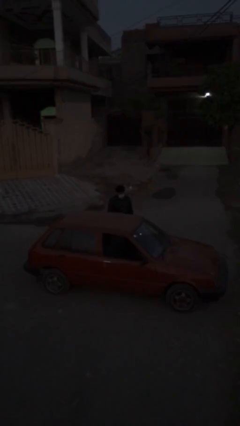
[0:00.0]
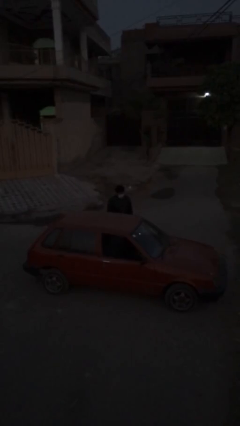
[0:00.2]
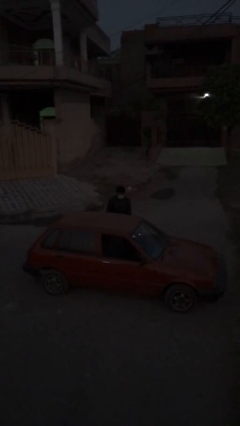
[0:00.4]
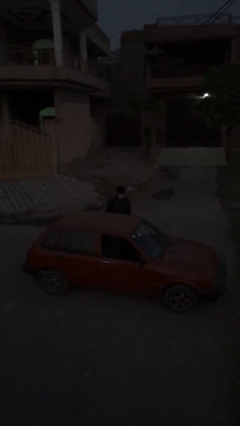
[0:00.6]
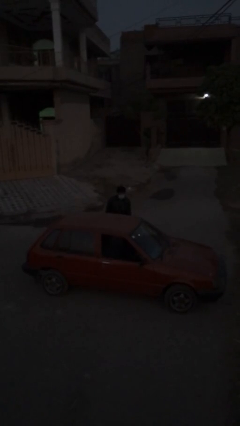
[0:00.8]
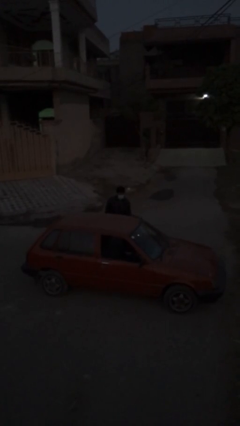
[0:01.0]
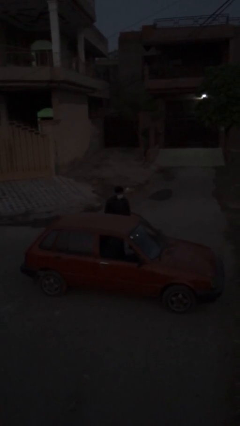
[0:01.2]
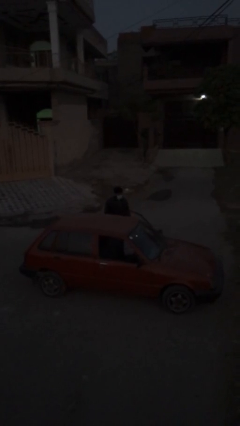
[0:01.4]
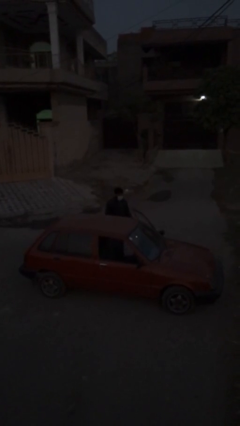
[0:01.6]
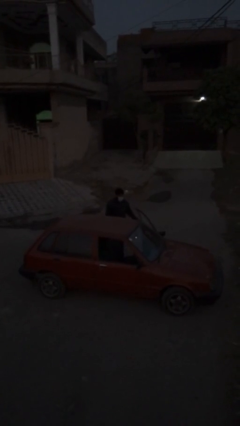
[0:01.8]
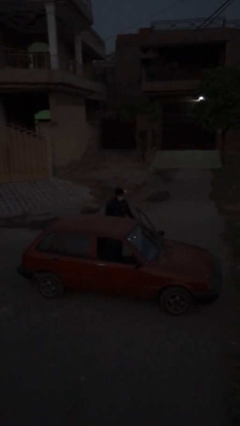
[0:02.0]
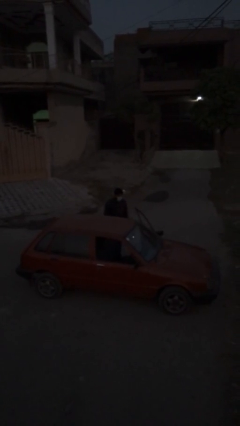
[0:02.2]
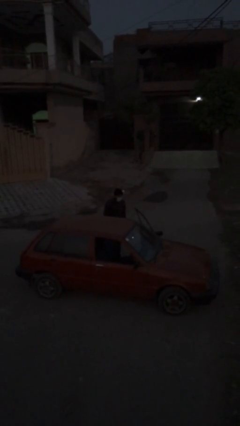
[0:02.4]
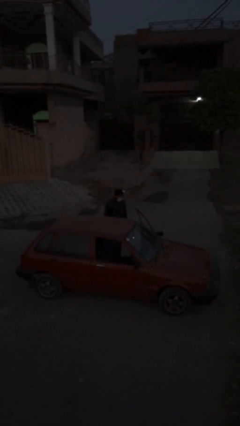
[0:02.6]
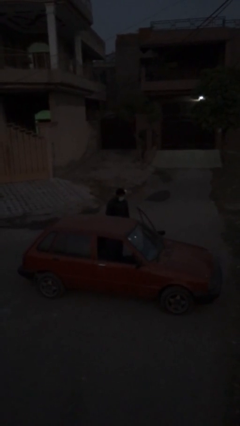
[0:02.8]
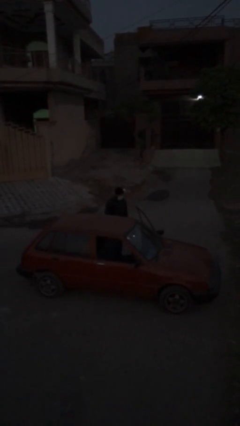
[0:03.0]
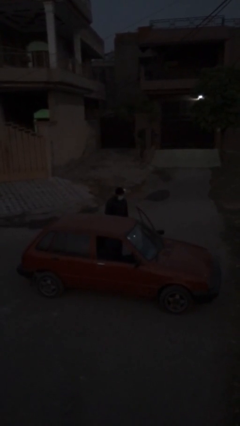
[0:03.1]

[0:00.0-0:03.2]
person opens car door

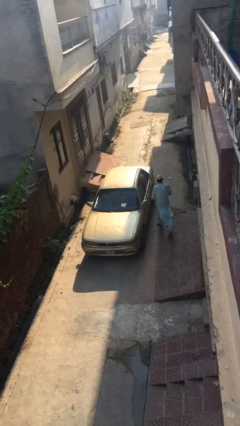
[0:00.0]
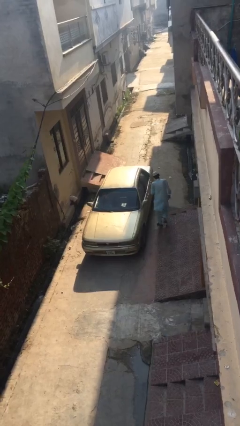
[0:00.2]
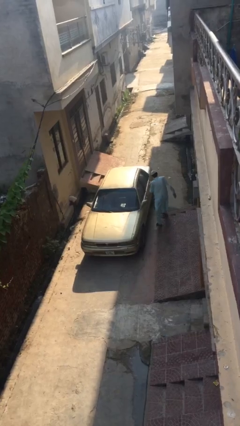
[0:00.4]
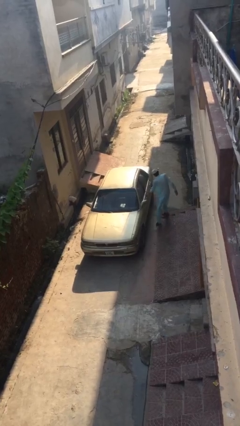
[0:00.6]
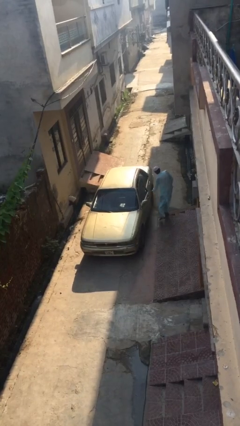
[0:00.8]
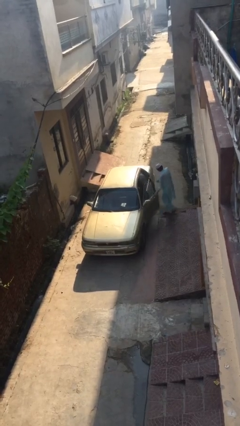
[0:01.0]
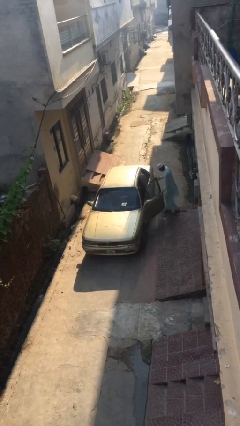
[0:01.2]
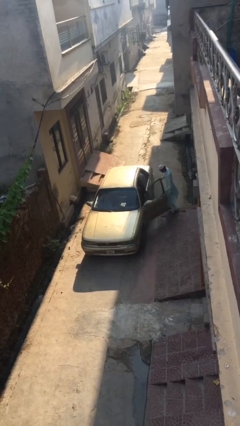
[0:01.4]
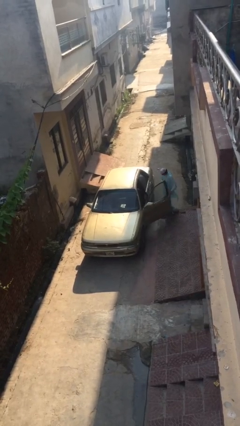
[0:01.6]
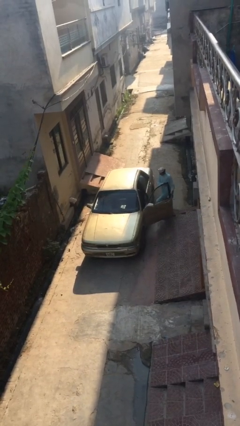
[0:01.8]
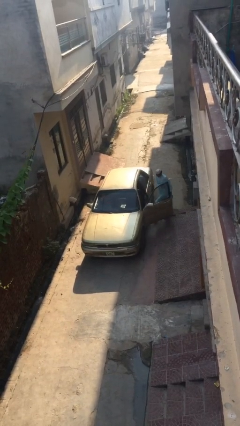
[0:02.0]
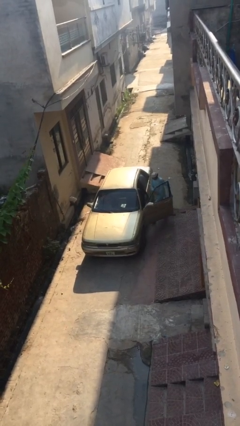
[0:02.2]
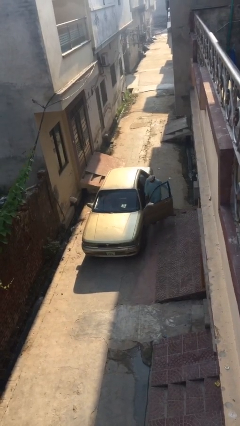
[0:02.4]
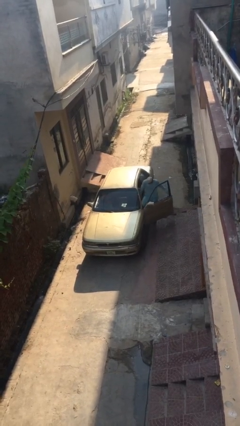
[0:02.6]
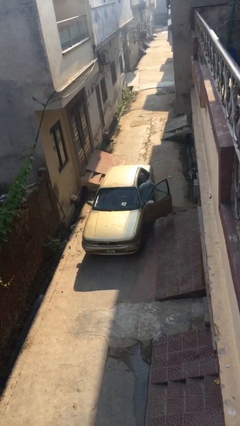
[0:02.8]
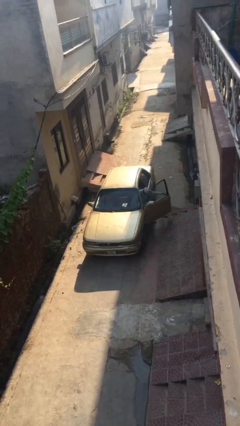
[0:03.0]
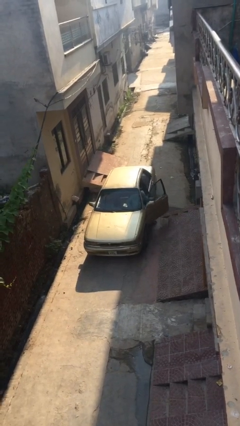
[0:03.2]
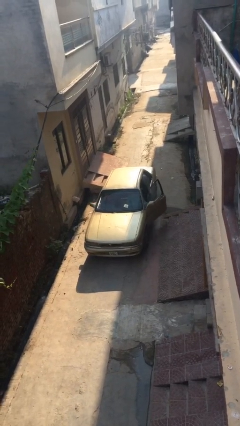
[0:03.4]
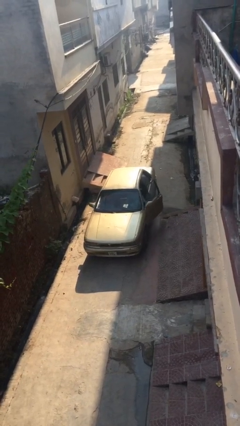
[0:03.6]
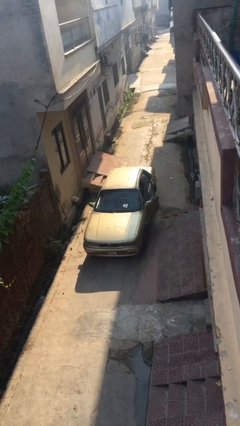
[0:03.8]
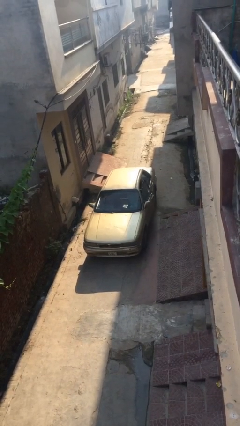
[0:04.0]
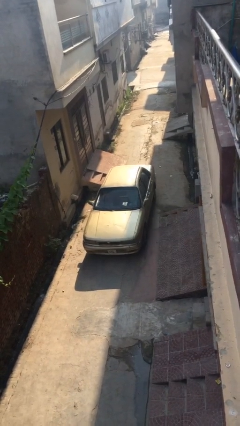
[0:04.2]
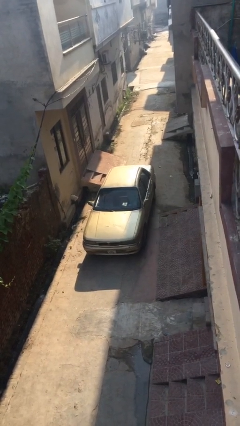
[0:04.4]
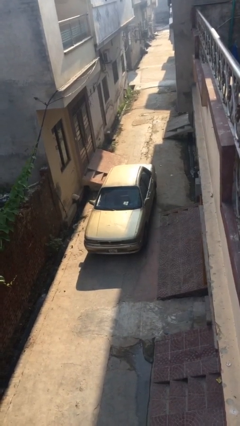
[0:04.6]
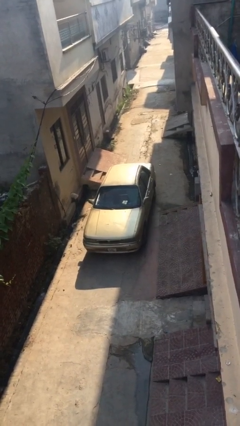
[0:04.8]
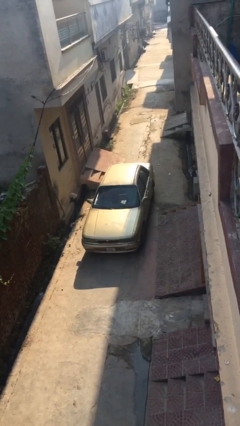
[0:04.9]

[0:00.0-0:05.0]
car picks up person

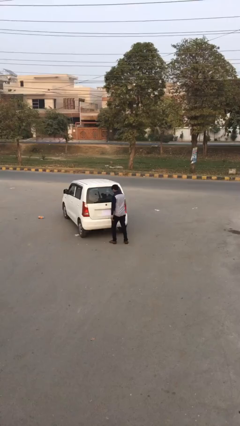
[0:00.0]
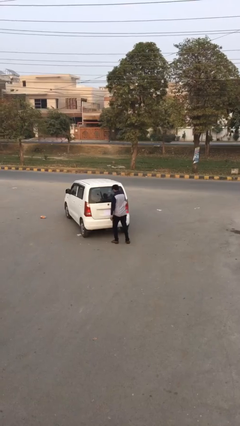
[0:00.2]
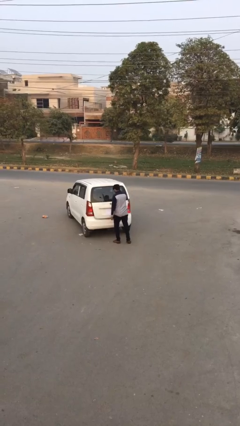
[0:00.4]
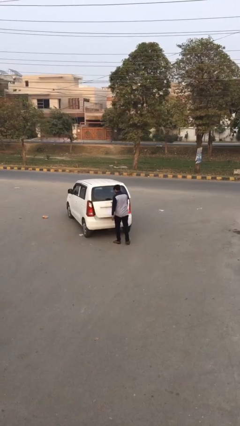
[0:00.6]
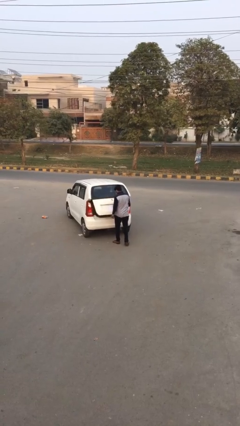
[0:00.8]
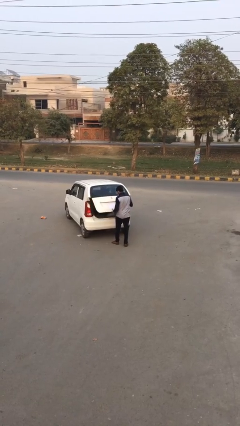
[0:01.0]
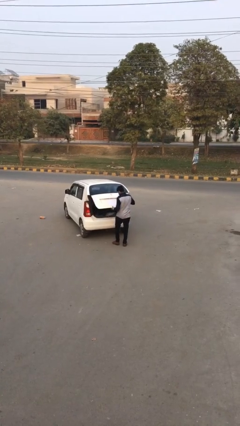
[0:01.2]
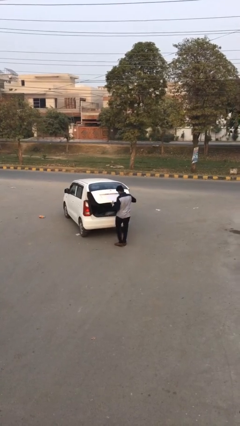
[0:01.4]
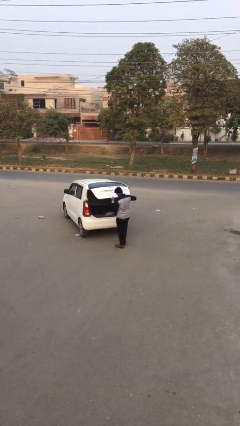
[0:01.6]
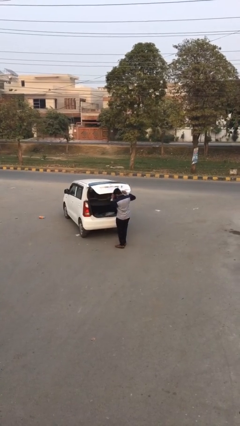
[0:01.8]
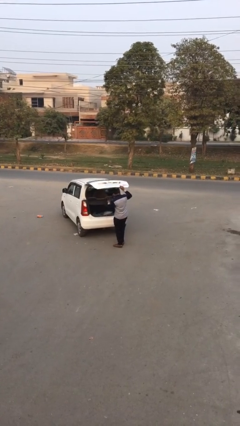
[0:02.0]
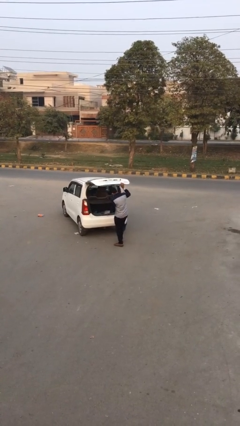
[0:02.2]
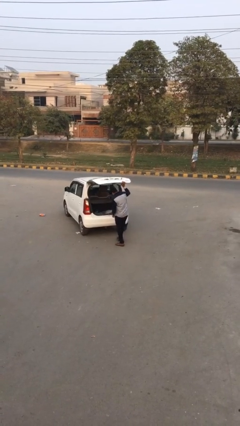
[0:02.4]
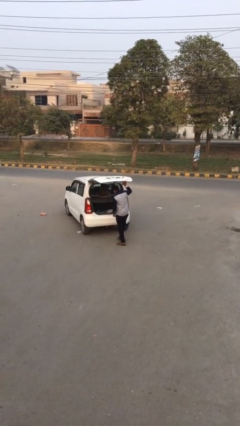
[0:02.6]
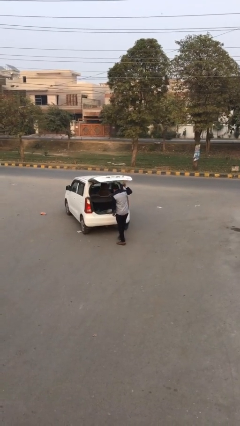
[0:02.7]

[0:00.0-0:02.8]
person opens car trunk

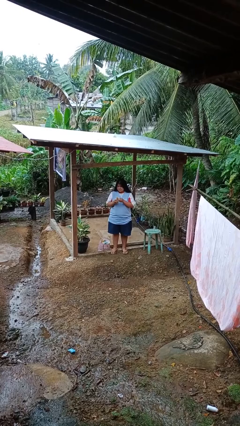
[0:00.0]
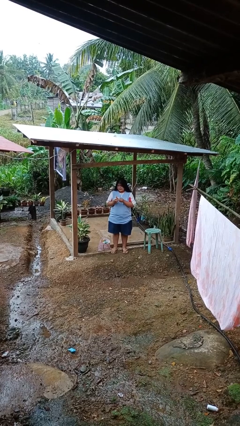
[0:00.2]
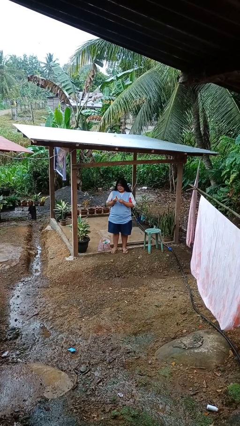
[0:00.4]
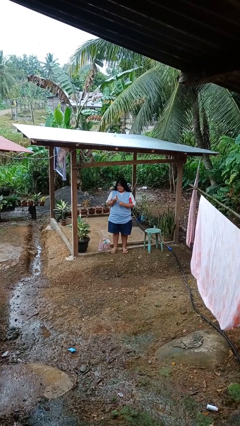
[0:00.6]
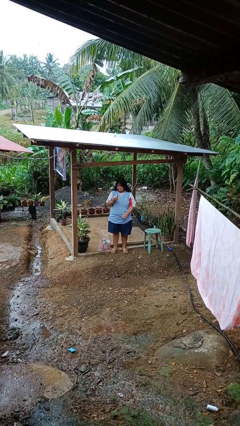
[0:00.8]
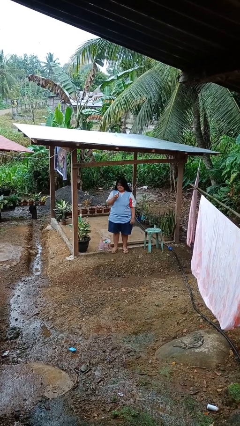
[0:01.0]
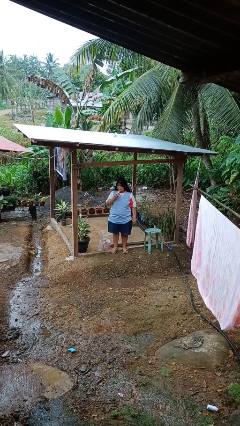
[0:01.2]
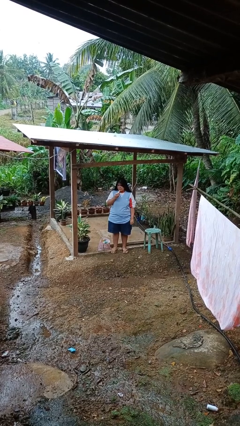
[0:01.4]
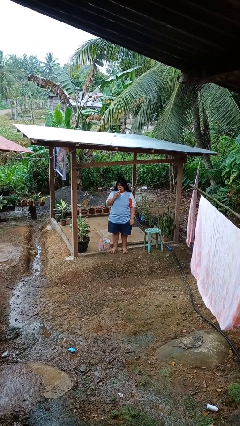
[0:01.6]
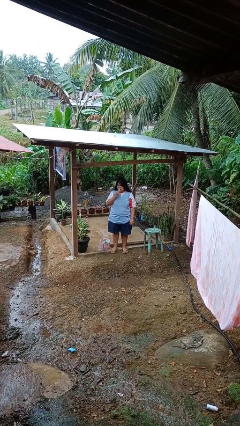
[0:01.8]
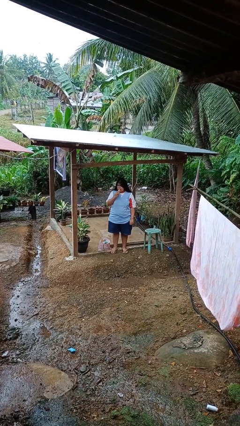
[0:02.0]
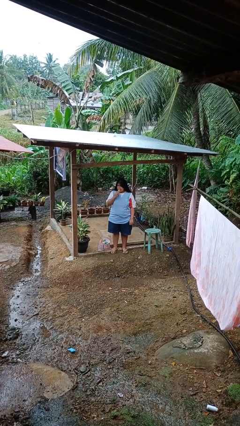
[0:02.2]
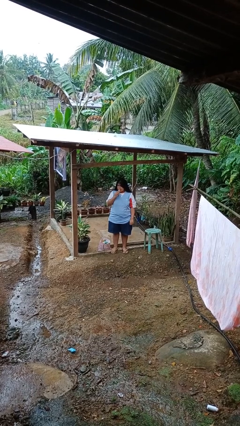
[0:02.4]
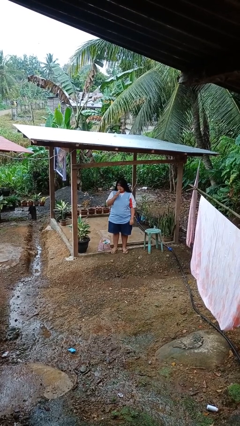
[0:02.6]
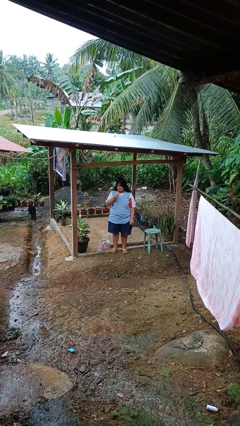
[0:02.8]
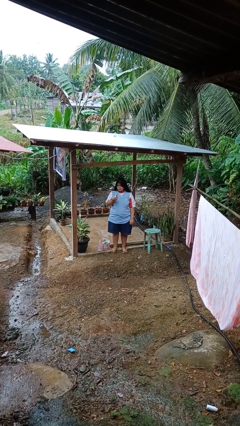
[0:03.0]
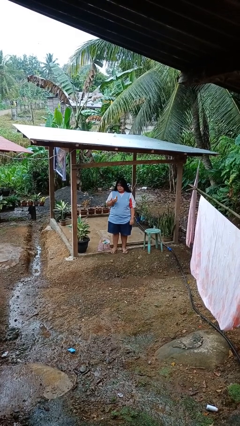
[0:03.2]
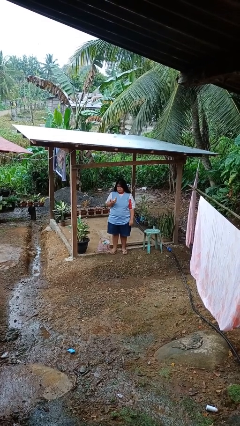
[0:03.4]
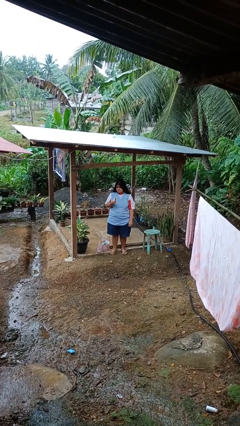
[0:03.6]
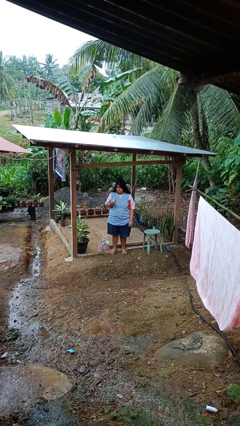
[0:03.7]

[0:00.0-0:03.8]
person eats banana

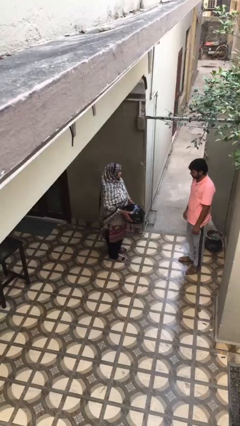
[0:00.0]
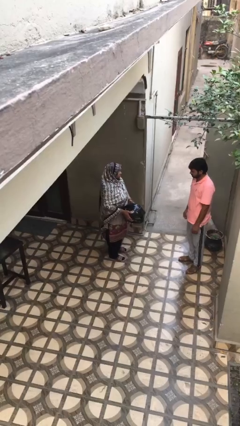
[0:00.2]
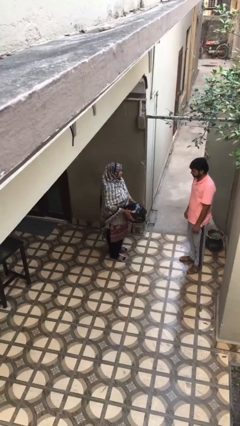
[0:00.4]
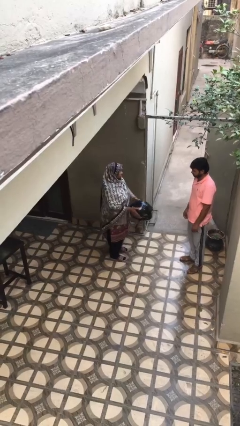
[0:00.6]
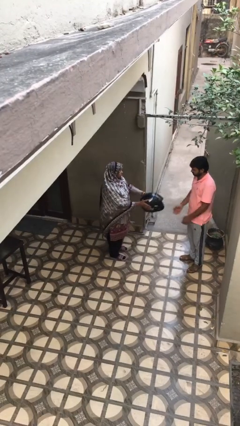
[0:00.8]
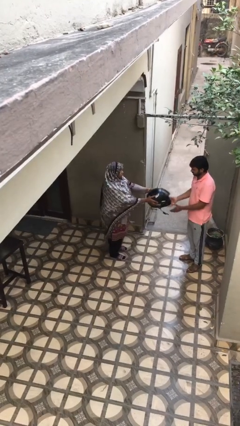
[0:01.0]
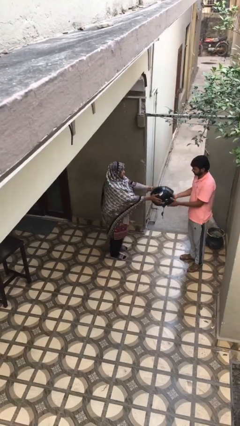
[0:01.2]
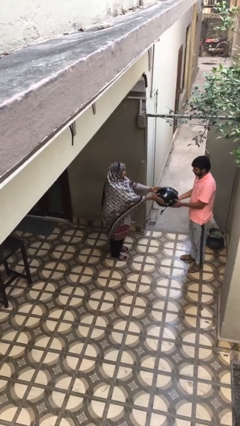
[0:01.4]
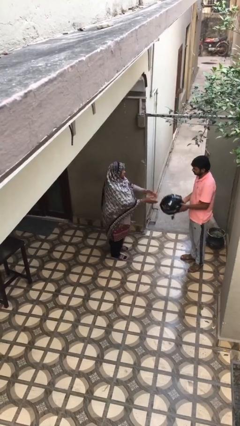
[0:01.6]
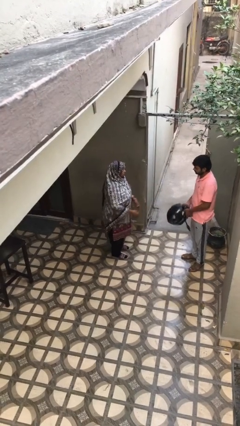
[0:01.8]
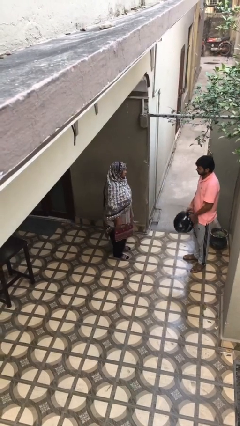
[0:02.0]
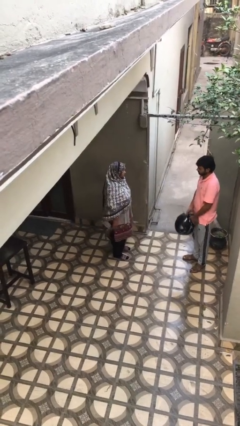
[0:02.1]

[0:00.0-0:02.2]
person transfers object to person

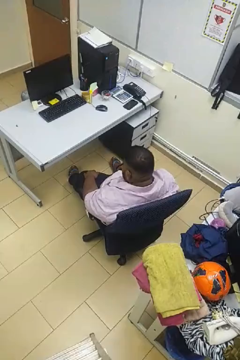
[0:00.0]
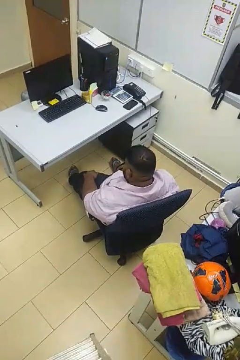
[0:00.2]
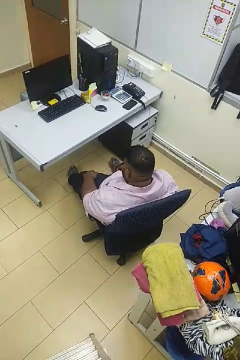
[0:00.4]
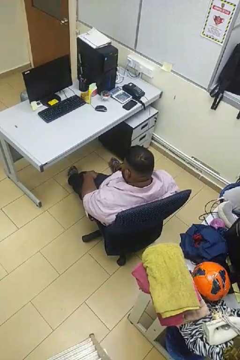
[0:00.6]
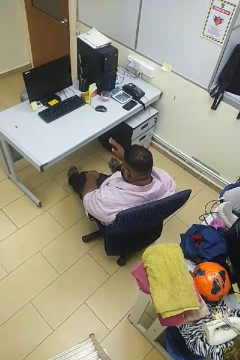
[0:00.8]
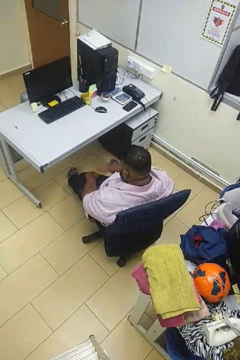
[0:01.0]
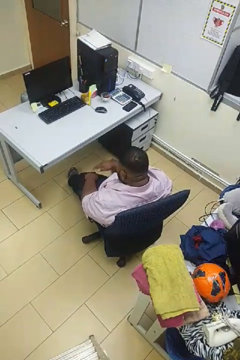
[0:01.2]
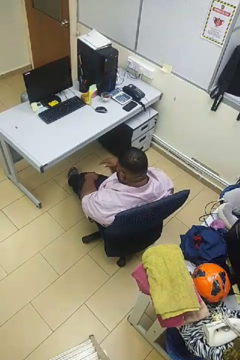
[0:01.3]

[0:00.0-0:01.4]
person swats bug
